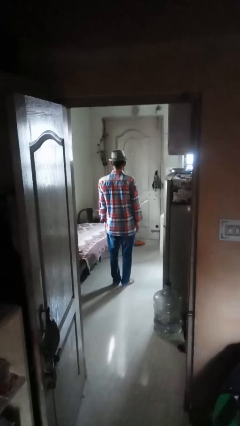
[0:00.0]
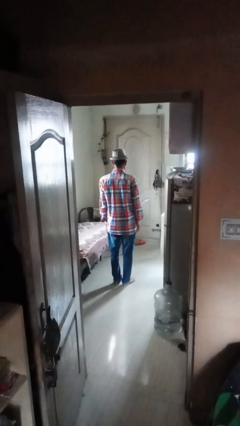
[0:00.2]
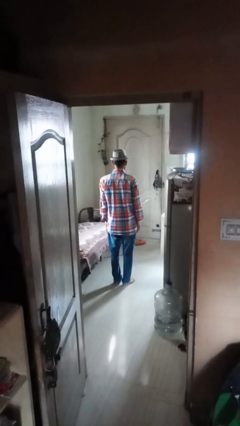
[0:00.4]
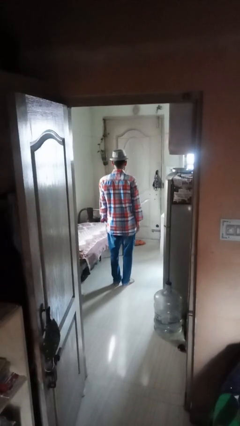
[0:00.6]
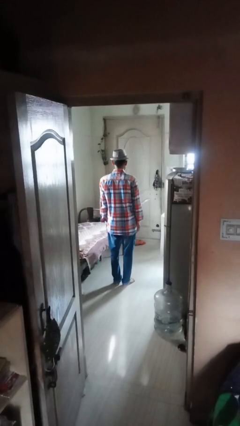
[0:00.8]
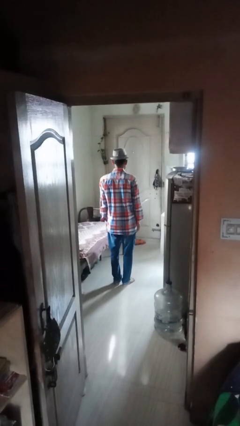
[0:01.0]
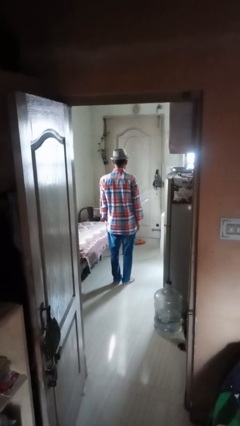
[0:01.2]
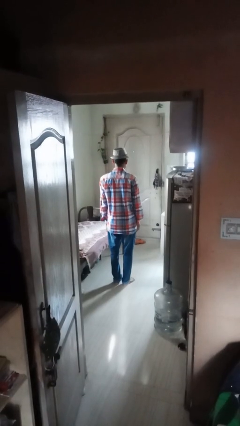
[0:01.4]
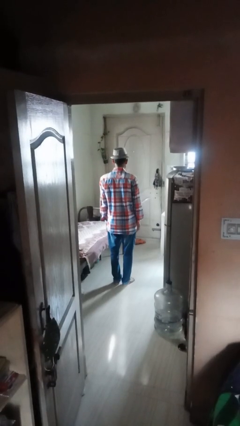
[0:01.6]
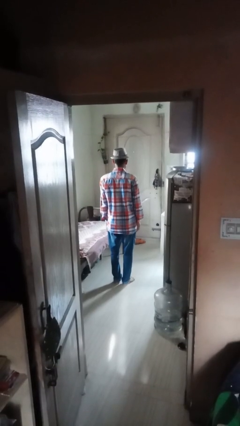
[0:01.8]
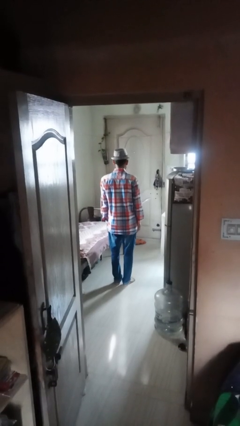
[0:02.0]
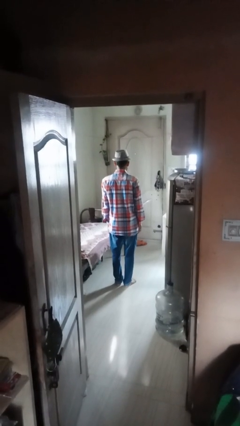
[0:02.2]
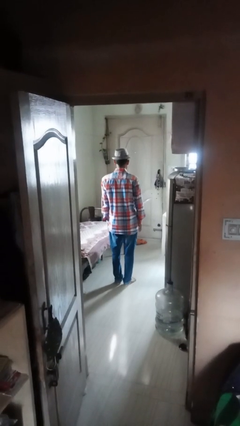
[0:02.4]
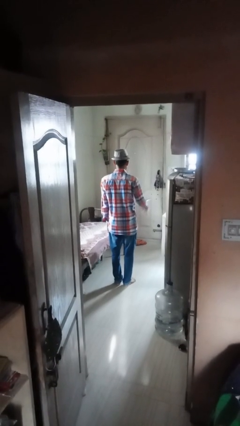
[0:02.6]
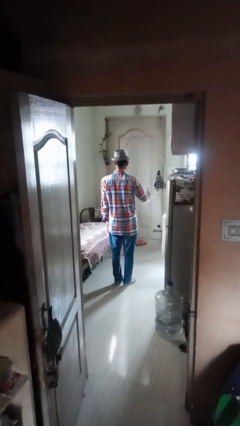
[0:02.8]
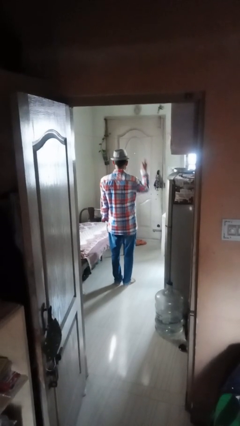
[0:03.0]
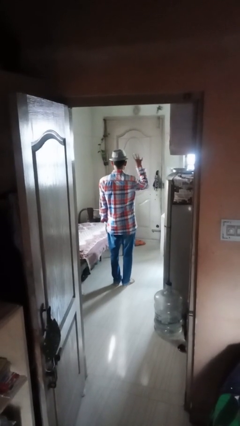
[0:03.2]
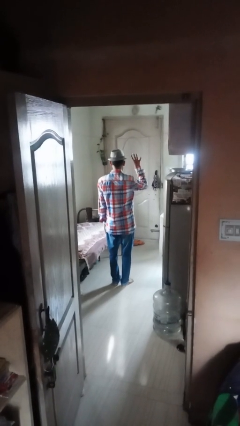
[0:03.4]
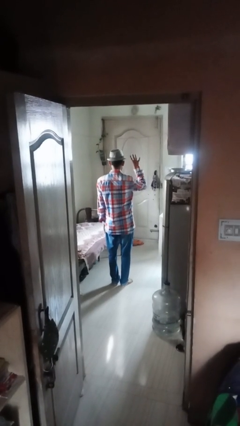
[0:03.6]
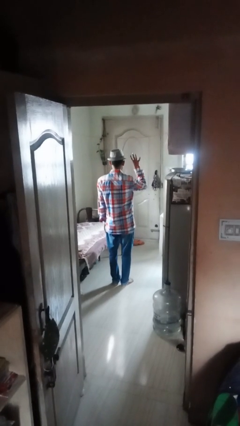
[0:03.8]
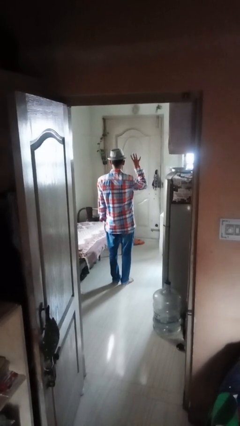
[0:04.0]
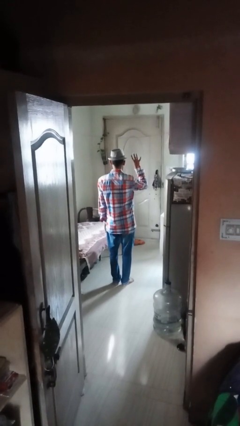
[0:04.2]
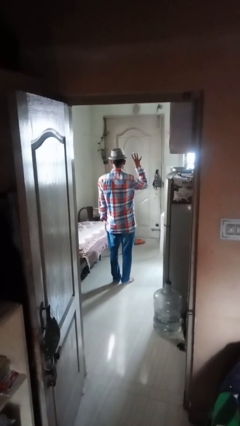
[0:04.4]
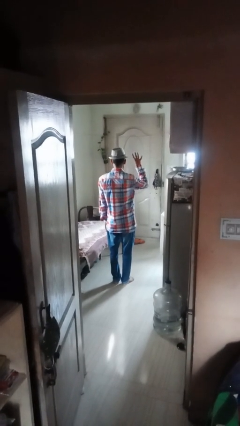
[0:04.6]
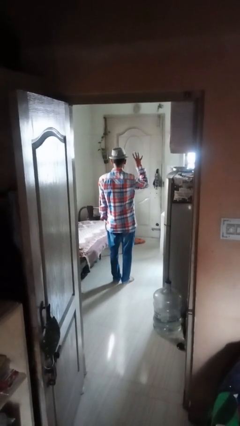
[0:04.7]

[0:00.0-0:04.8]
person gestures number four

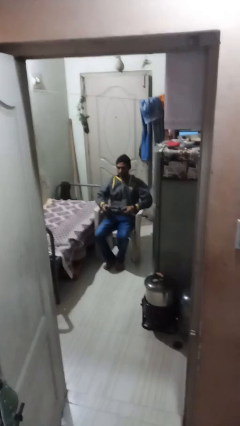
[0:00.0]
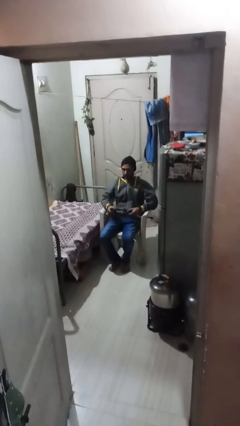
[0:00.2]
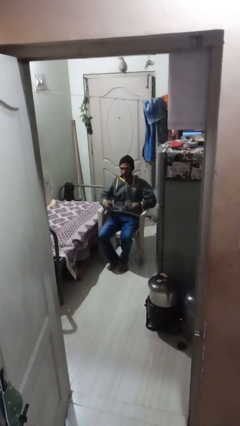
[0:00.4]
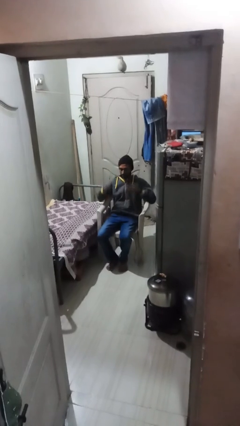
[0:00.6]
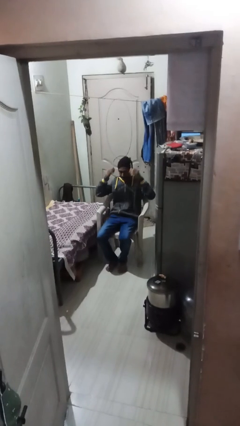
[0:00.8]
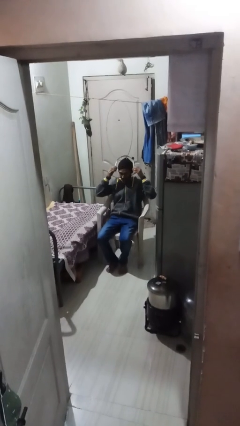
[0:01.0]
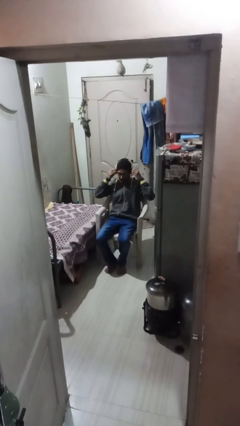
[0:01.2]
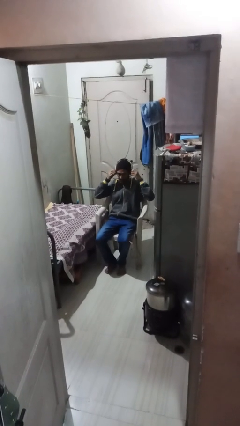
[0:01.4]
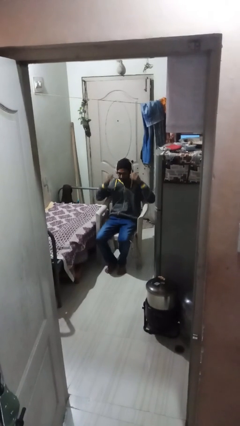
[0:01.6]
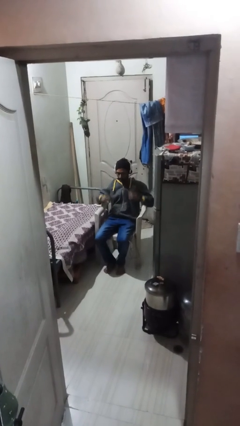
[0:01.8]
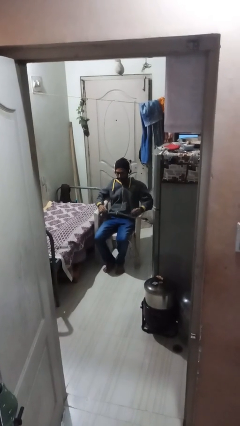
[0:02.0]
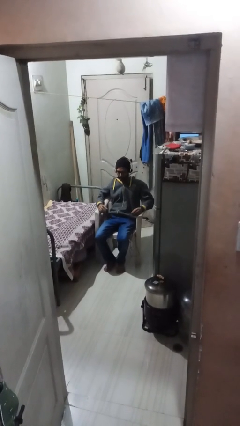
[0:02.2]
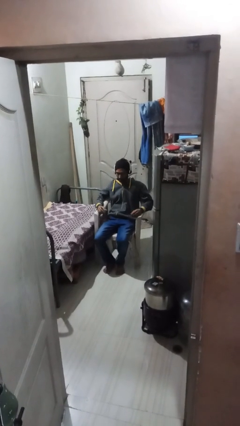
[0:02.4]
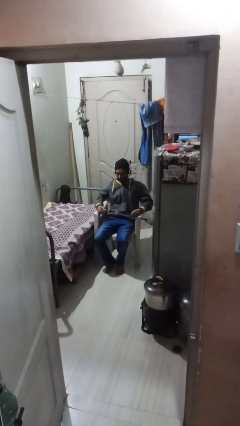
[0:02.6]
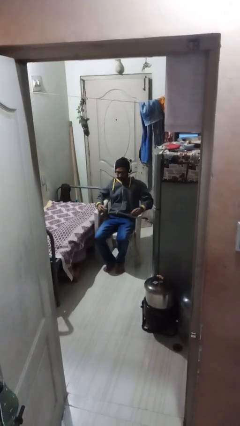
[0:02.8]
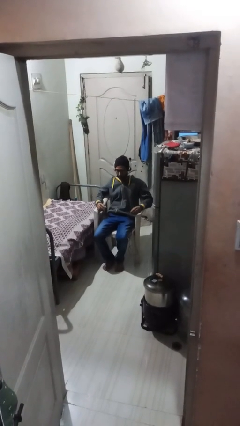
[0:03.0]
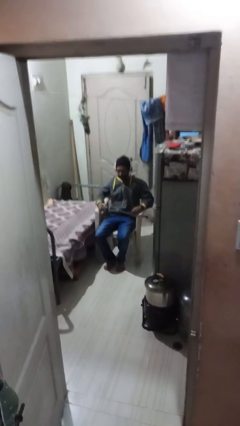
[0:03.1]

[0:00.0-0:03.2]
person puts on headphones

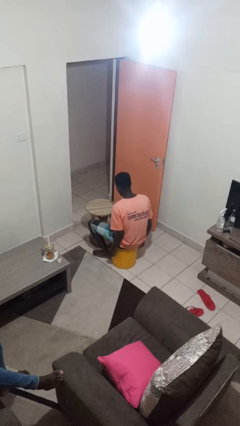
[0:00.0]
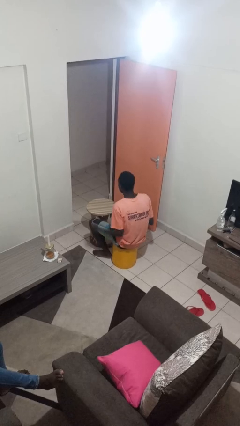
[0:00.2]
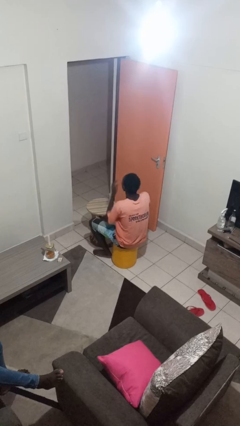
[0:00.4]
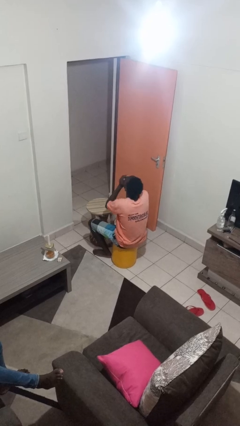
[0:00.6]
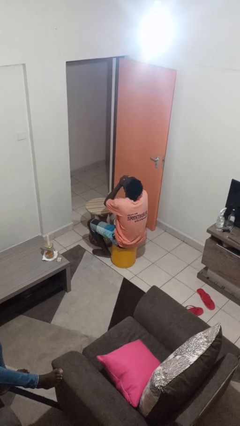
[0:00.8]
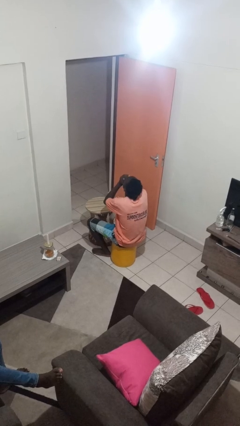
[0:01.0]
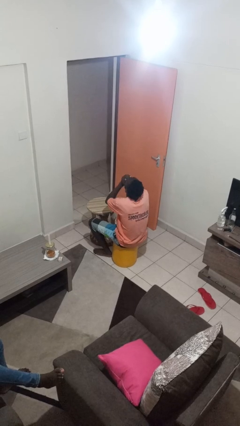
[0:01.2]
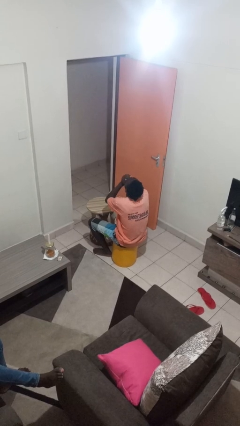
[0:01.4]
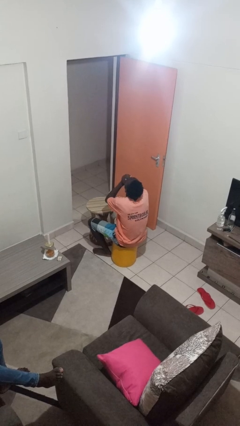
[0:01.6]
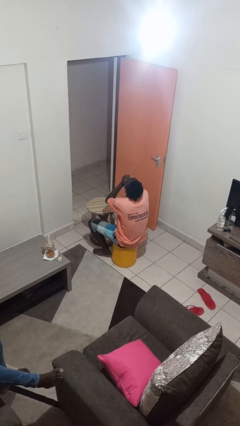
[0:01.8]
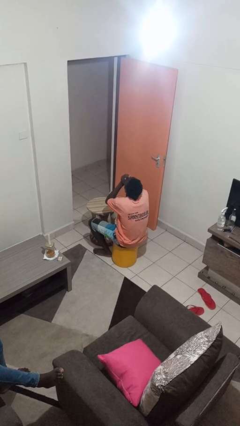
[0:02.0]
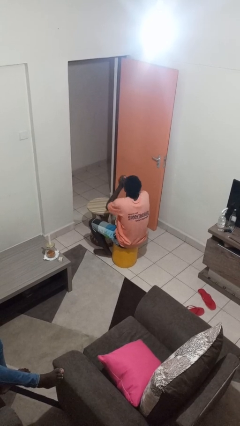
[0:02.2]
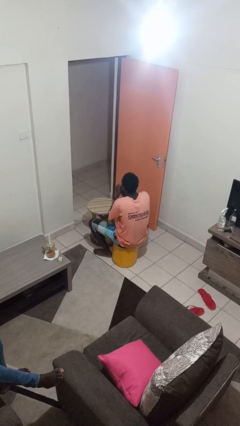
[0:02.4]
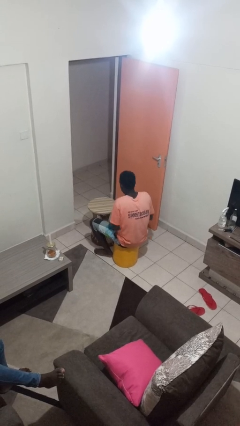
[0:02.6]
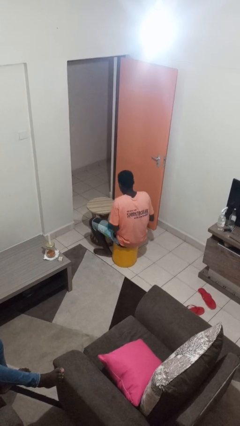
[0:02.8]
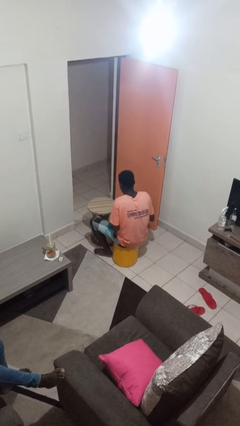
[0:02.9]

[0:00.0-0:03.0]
person yawns

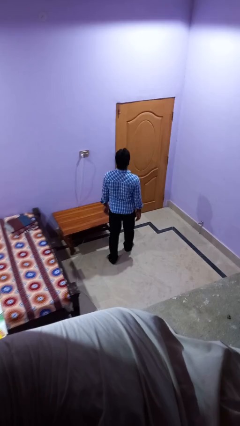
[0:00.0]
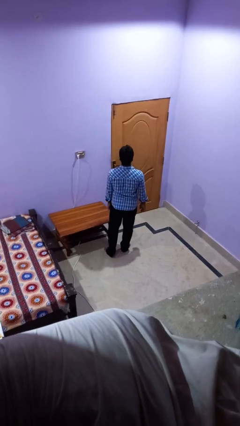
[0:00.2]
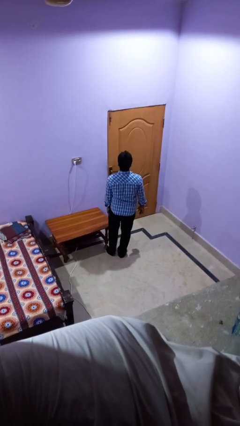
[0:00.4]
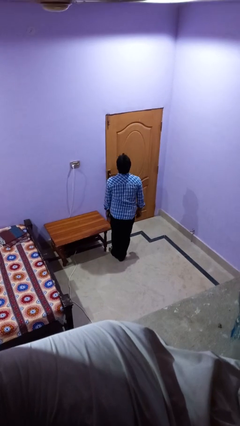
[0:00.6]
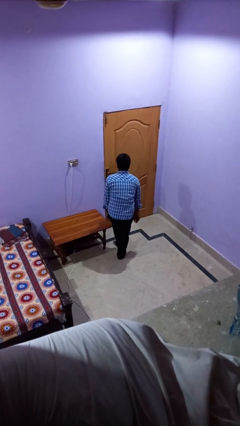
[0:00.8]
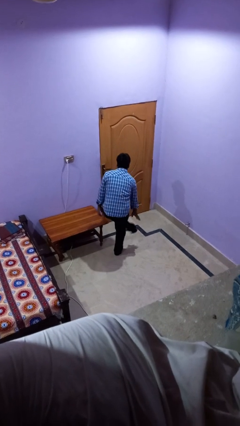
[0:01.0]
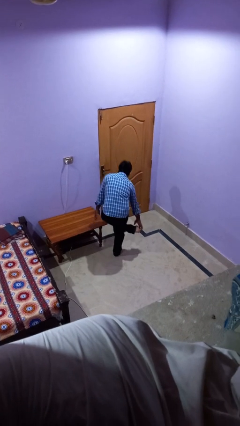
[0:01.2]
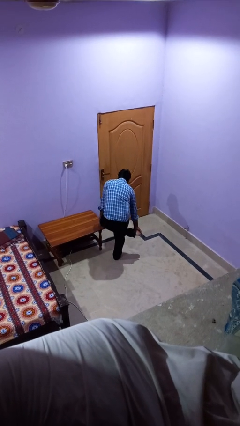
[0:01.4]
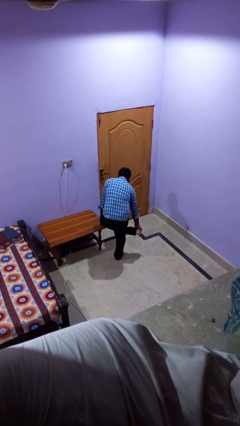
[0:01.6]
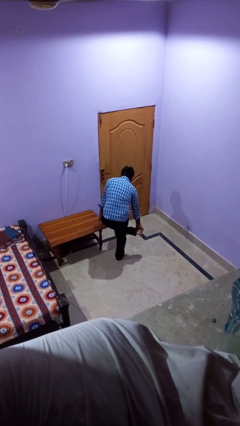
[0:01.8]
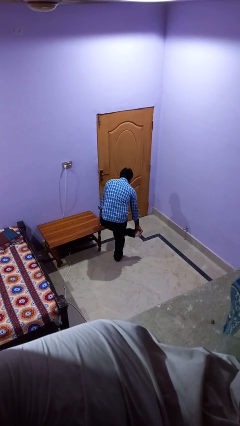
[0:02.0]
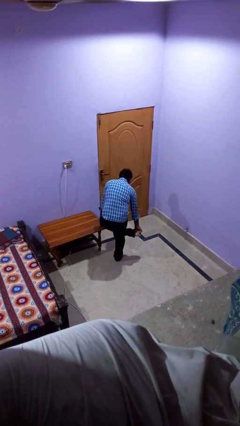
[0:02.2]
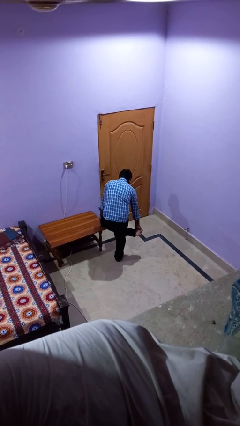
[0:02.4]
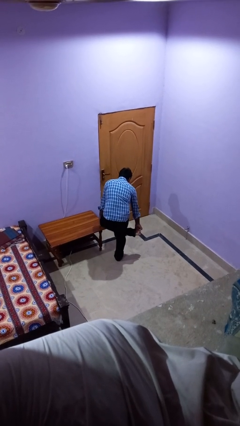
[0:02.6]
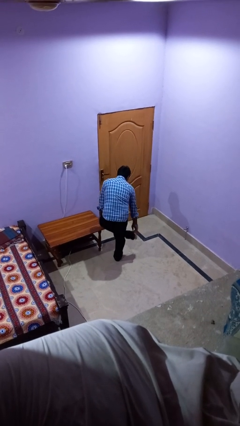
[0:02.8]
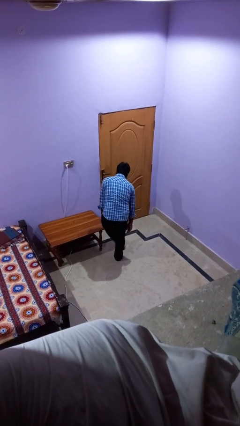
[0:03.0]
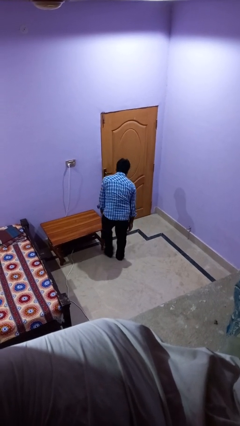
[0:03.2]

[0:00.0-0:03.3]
person stubs toe

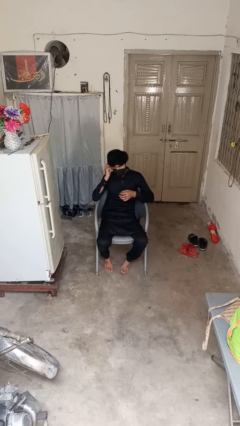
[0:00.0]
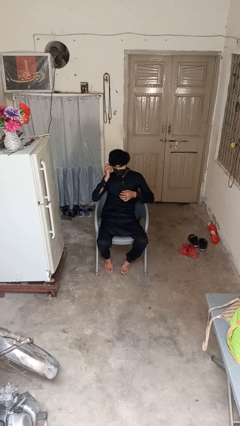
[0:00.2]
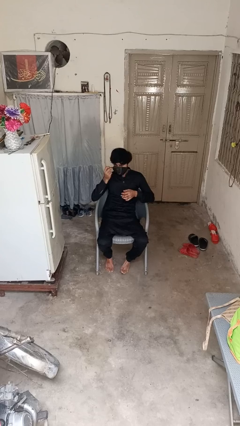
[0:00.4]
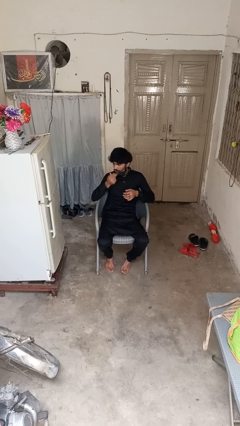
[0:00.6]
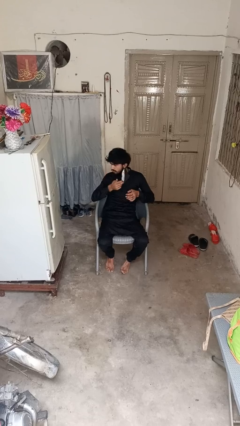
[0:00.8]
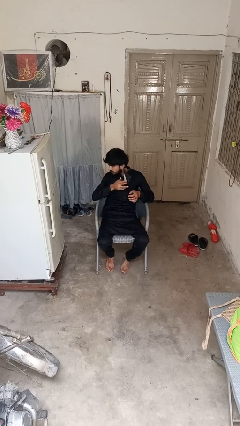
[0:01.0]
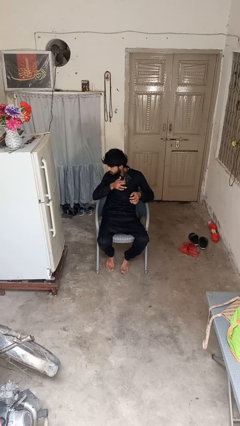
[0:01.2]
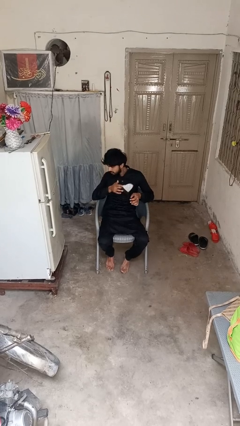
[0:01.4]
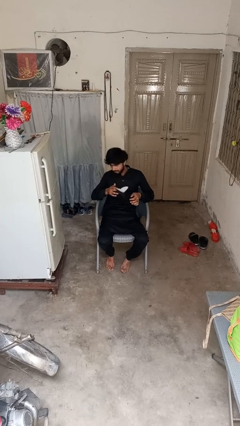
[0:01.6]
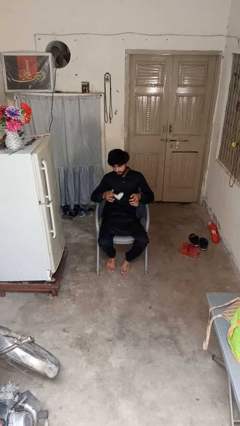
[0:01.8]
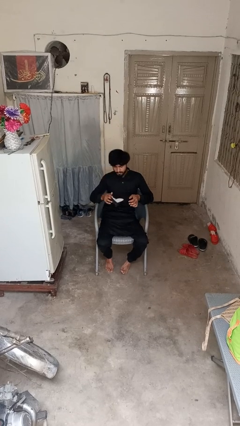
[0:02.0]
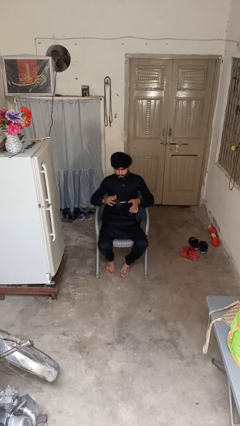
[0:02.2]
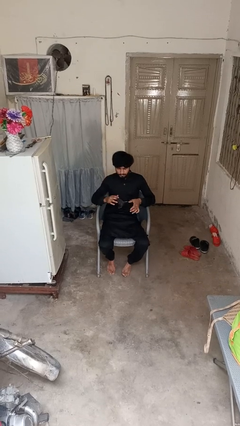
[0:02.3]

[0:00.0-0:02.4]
person takes off facemask

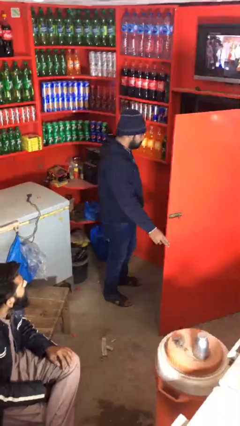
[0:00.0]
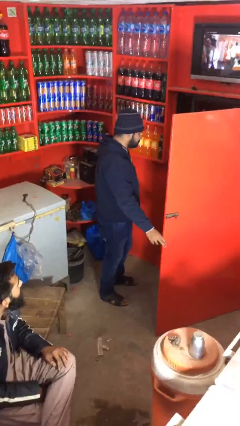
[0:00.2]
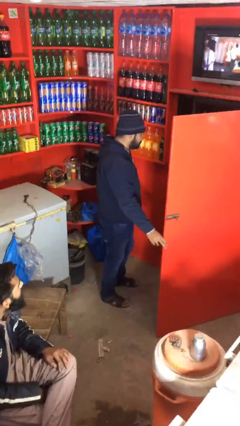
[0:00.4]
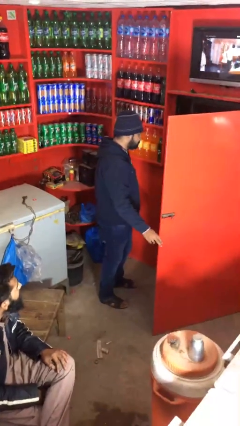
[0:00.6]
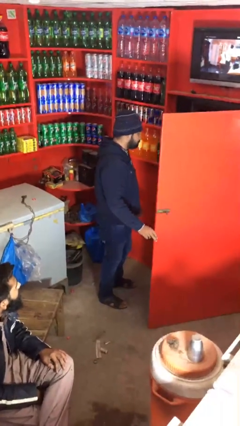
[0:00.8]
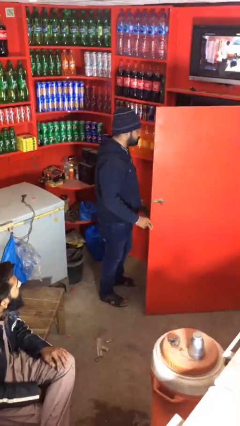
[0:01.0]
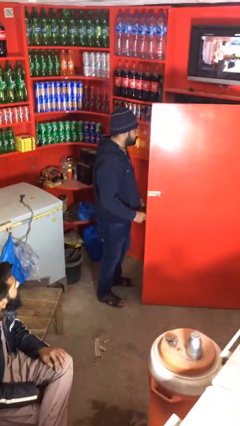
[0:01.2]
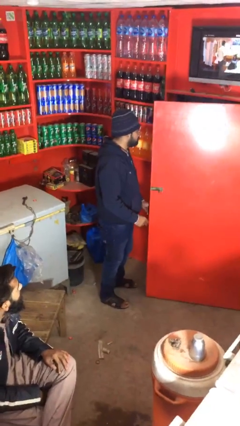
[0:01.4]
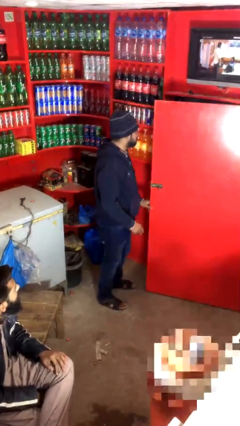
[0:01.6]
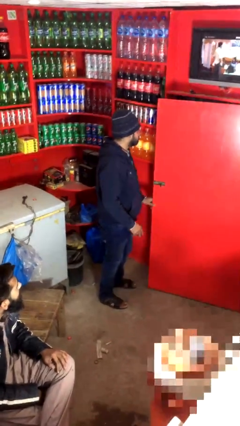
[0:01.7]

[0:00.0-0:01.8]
person closes facility door
